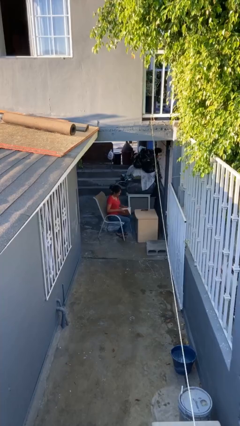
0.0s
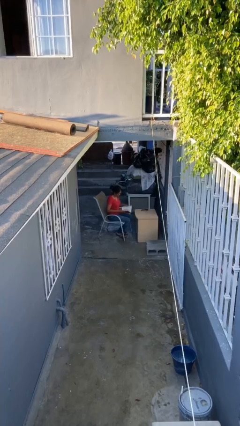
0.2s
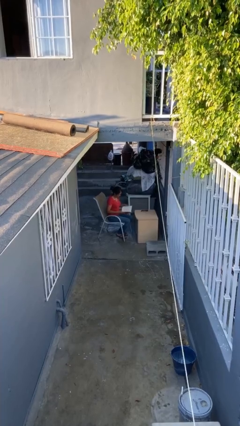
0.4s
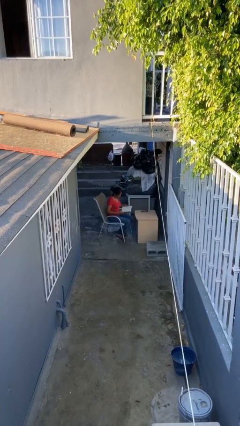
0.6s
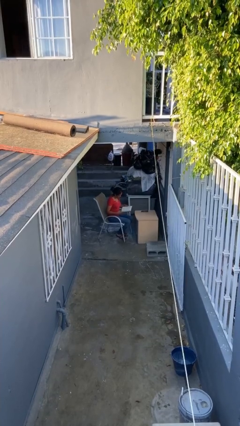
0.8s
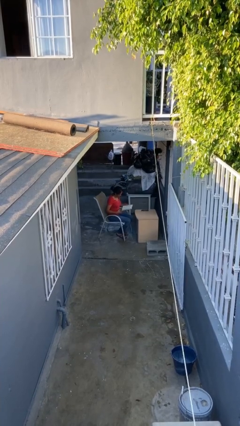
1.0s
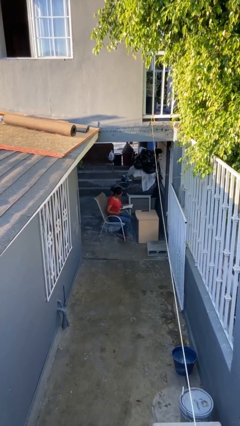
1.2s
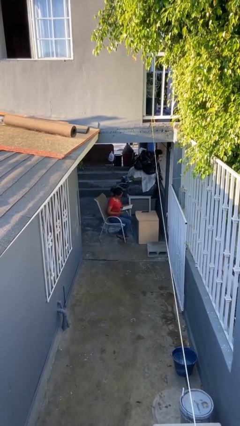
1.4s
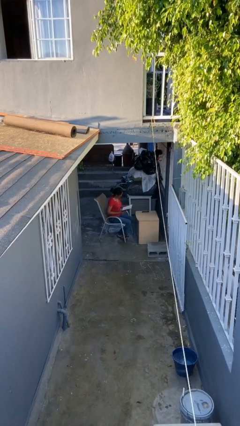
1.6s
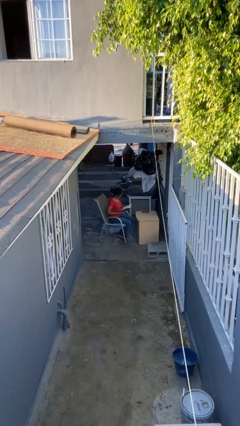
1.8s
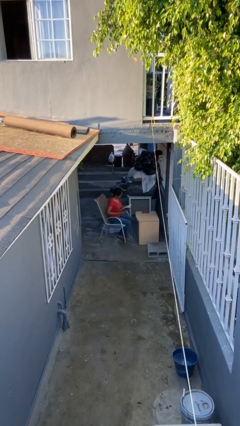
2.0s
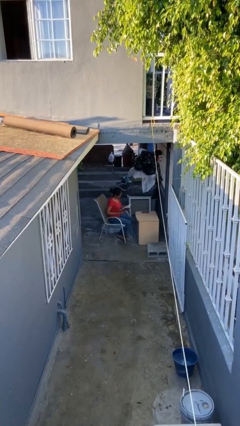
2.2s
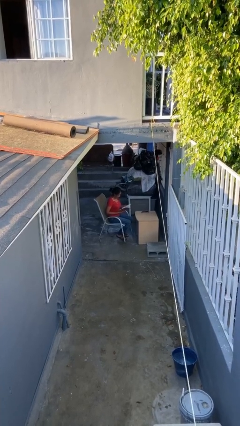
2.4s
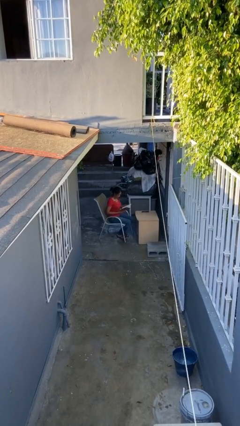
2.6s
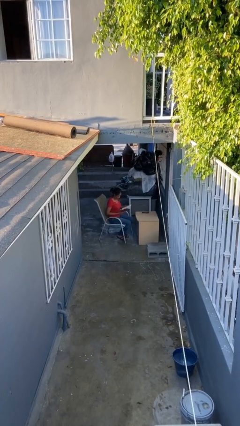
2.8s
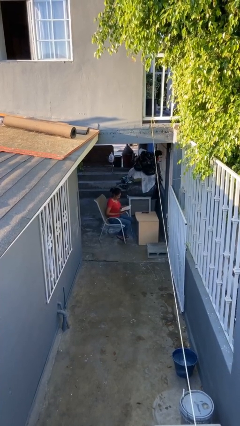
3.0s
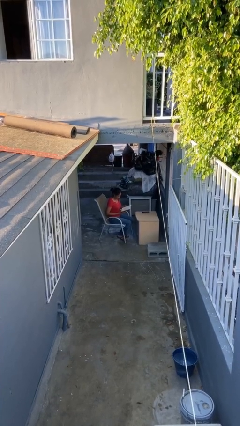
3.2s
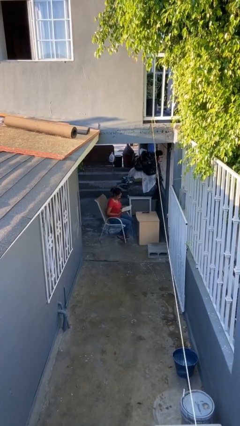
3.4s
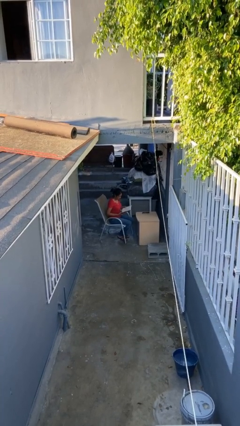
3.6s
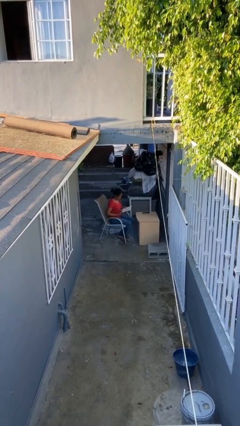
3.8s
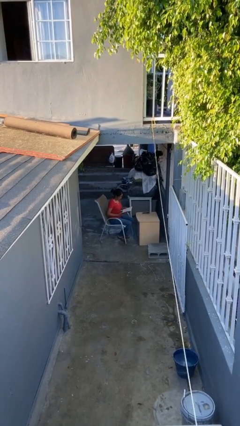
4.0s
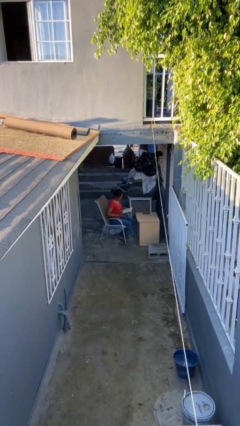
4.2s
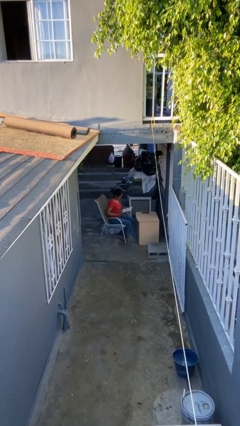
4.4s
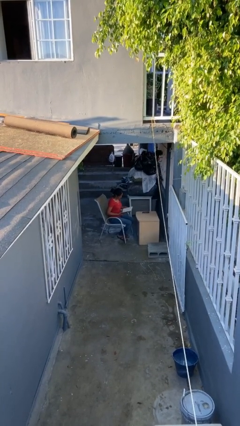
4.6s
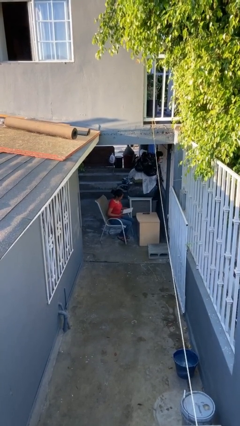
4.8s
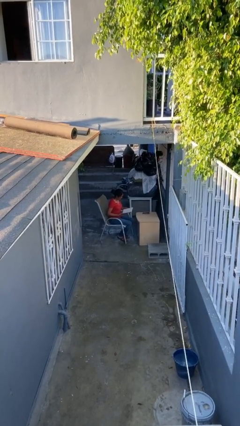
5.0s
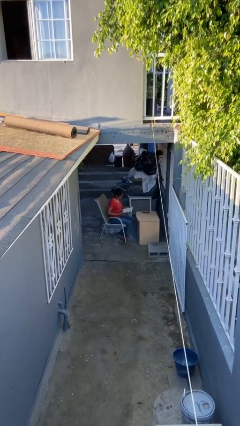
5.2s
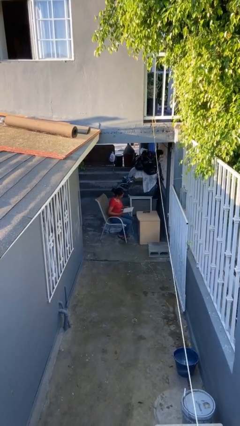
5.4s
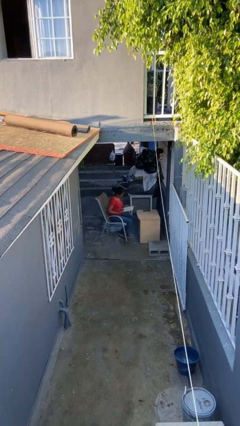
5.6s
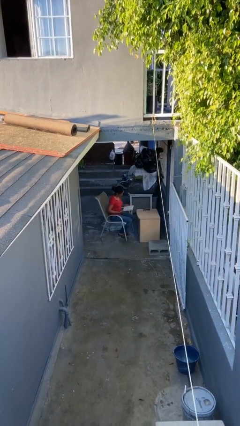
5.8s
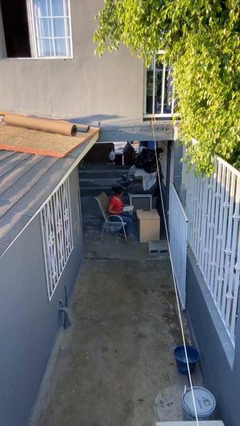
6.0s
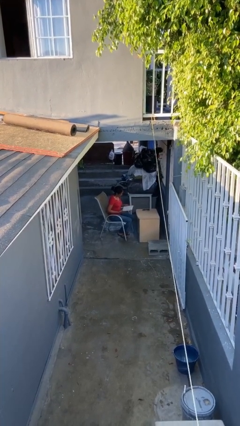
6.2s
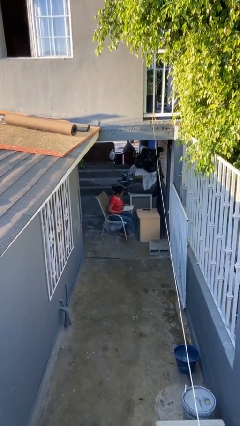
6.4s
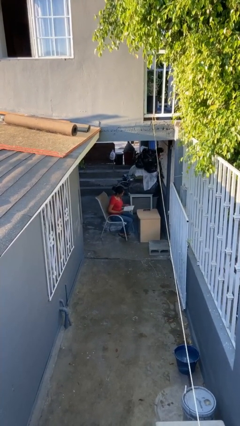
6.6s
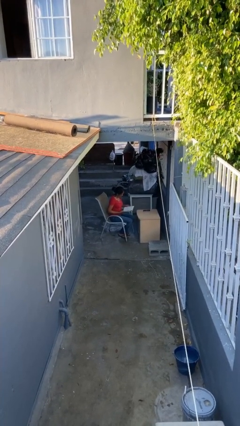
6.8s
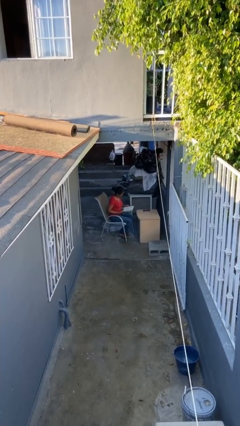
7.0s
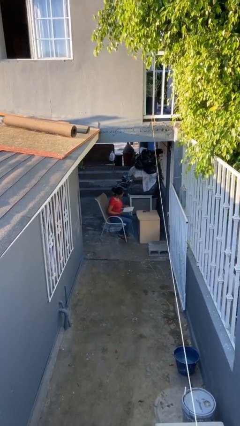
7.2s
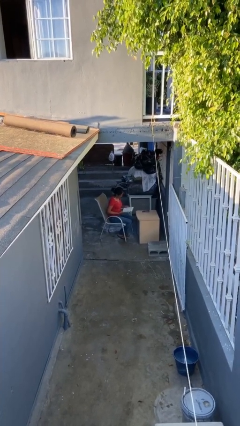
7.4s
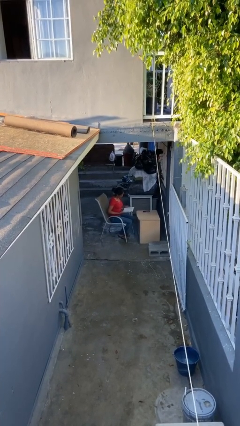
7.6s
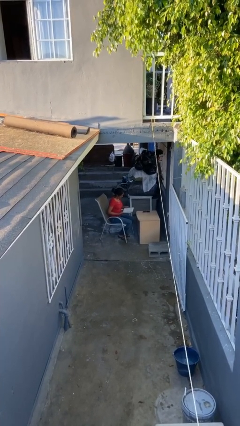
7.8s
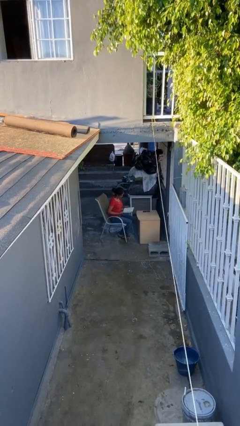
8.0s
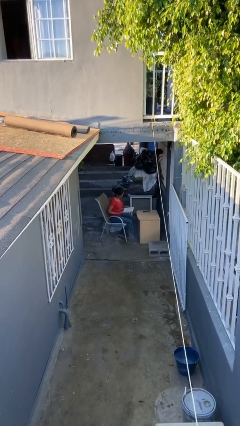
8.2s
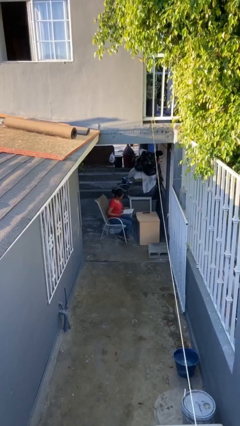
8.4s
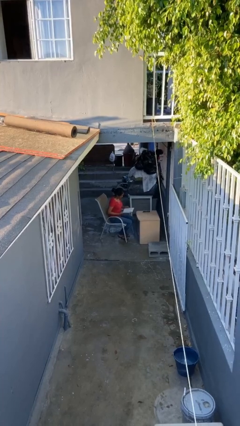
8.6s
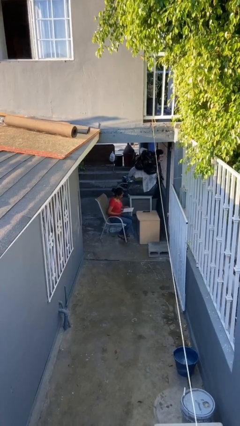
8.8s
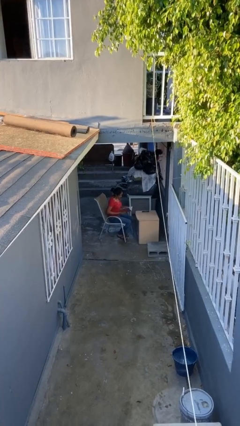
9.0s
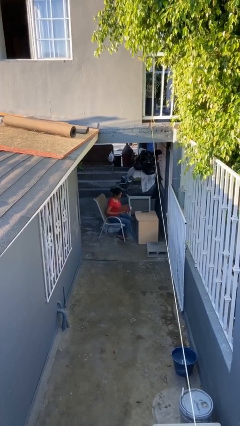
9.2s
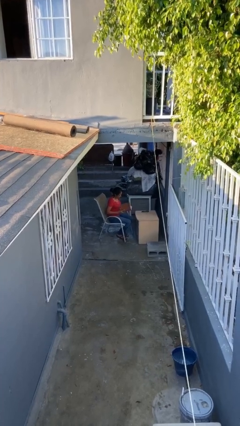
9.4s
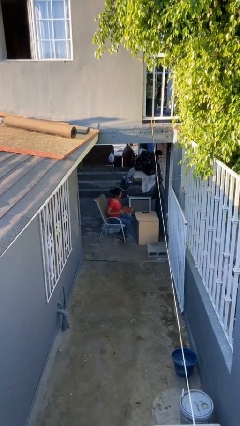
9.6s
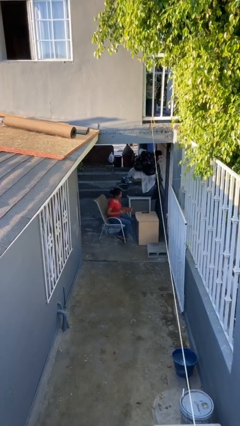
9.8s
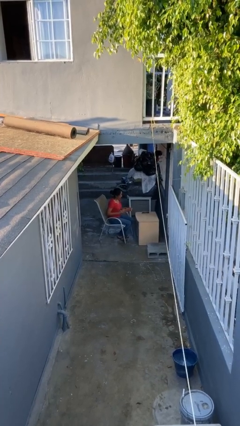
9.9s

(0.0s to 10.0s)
person reads document

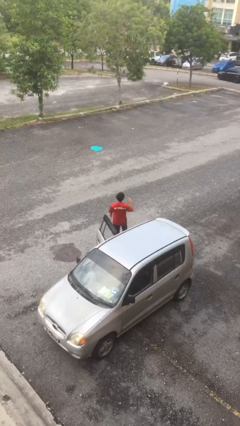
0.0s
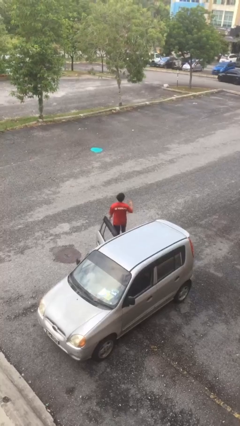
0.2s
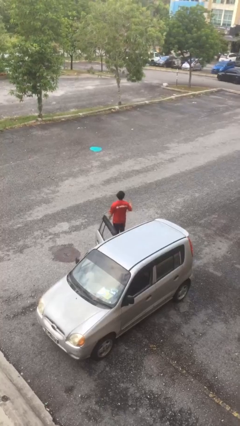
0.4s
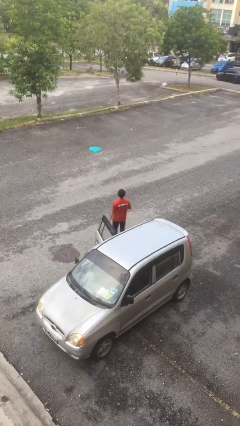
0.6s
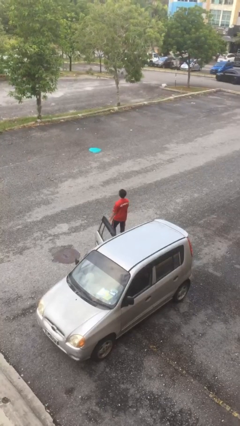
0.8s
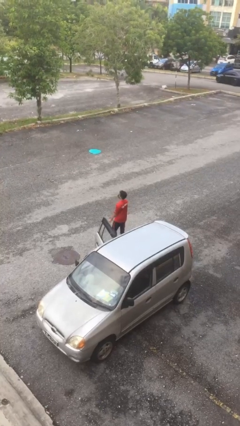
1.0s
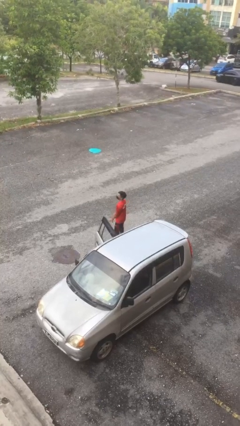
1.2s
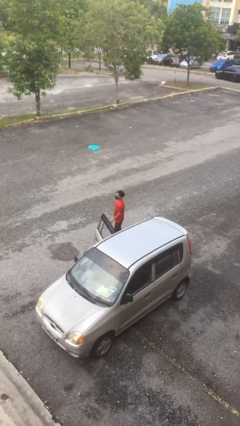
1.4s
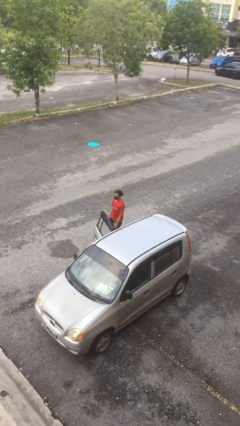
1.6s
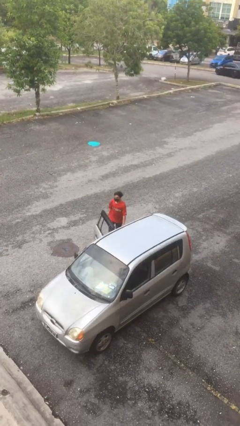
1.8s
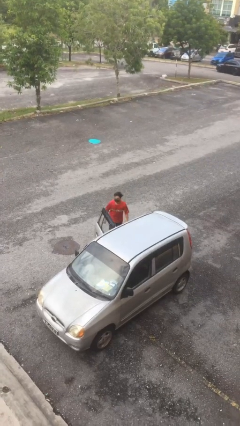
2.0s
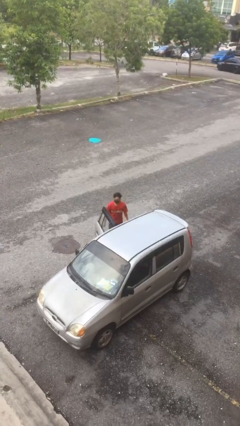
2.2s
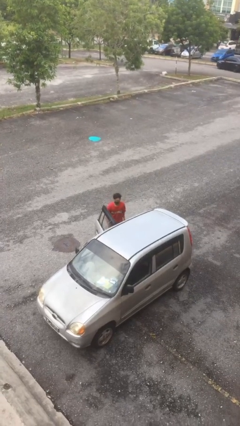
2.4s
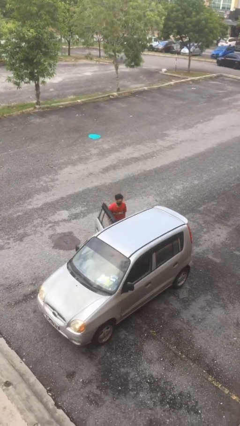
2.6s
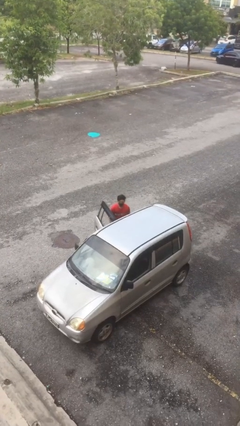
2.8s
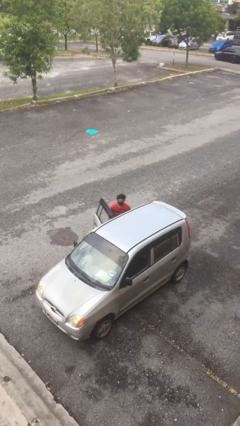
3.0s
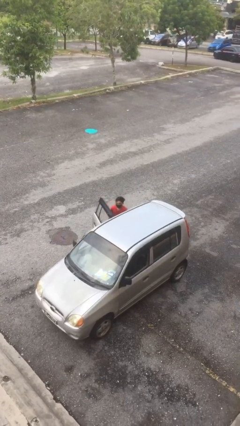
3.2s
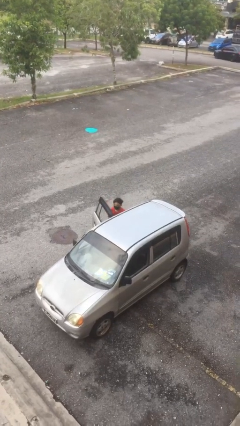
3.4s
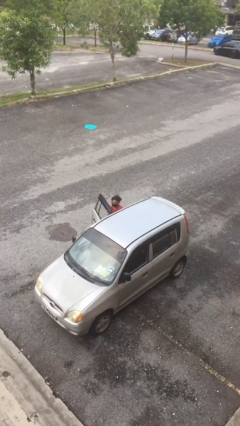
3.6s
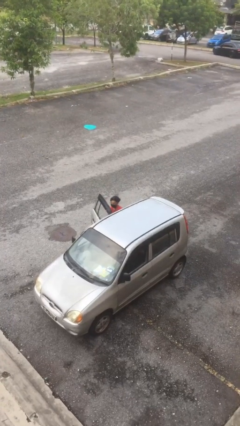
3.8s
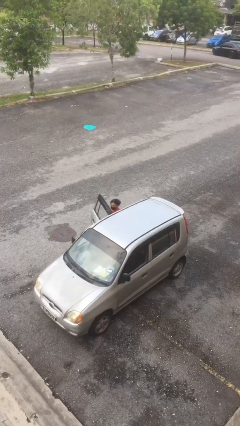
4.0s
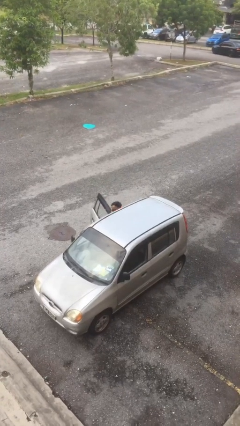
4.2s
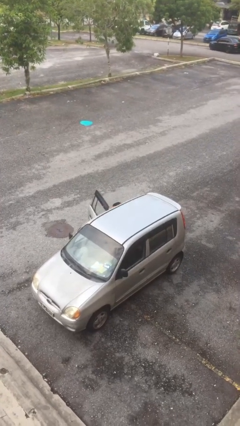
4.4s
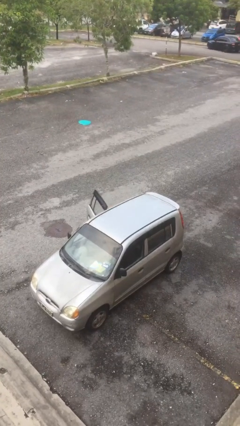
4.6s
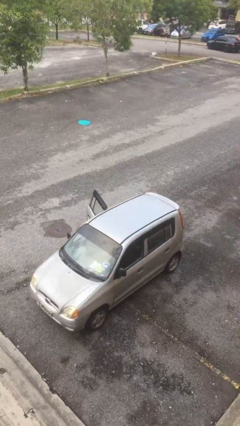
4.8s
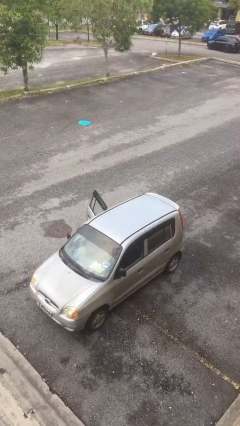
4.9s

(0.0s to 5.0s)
person enters car

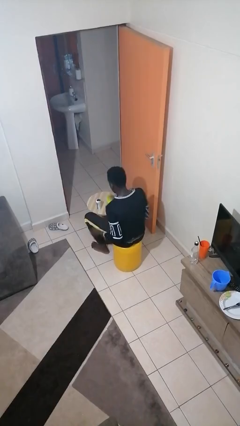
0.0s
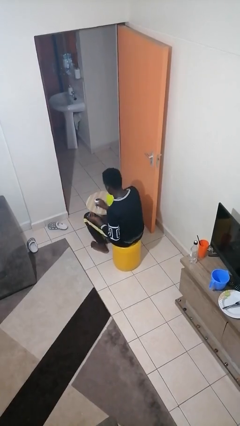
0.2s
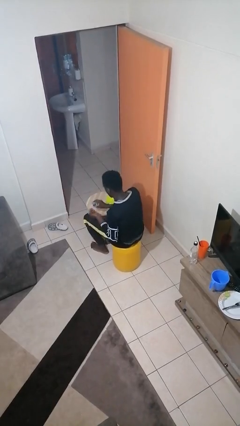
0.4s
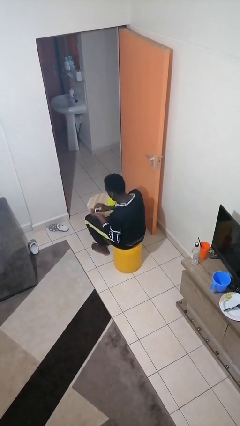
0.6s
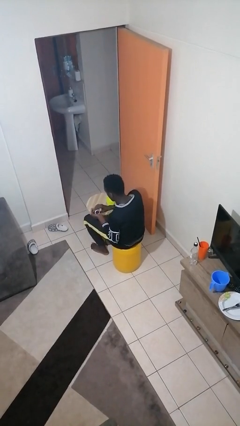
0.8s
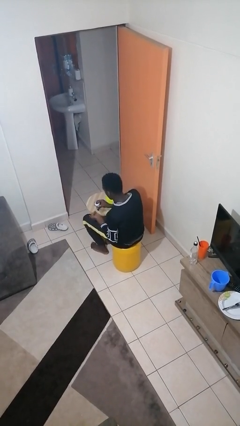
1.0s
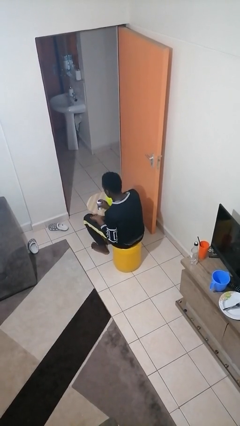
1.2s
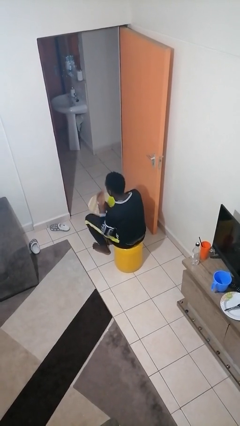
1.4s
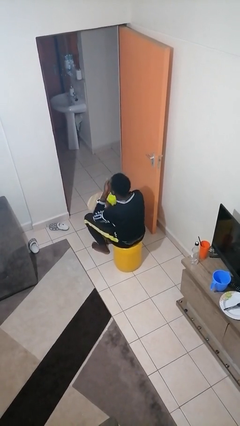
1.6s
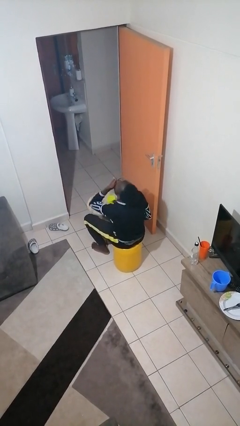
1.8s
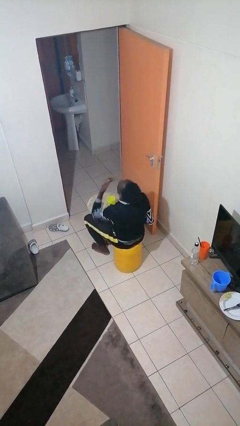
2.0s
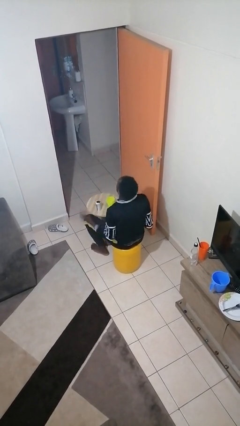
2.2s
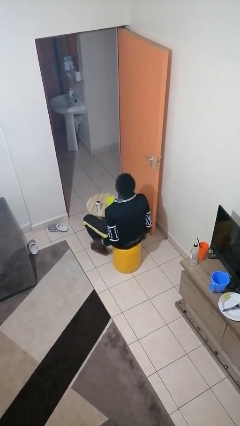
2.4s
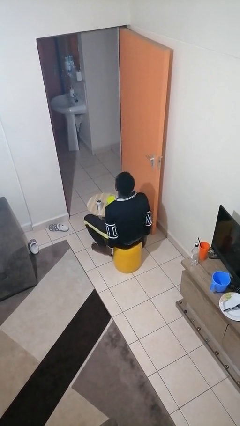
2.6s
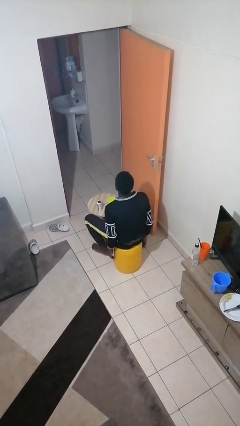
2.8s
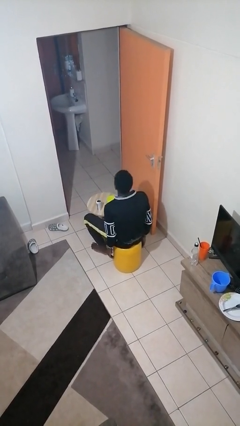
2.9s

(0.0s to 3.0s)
person takes medicine pills
